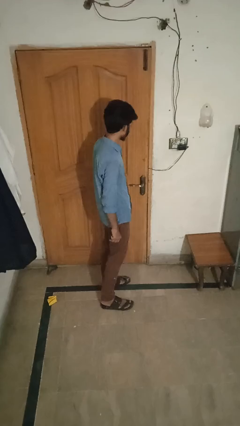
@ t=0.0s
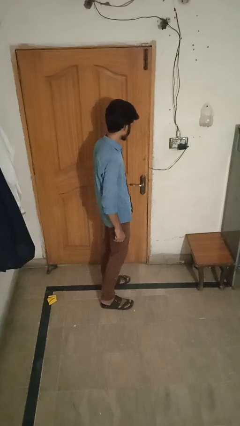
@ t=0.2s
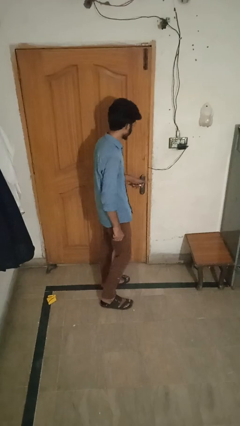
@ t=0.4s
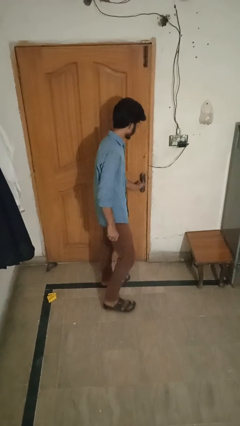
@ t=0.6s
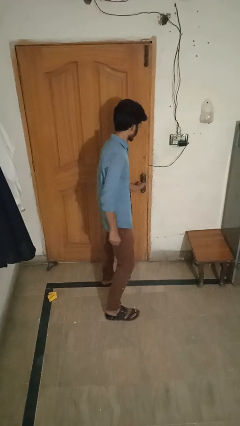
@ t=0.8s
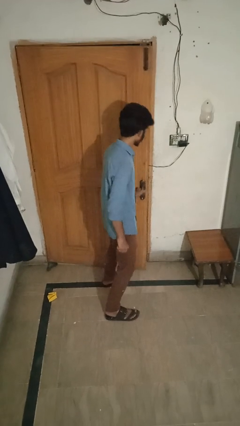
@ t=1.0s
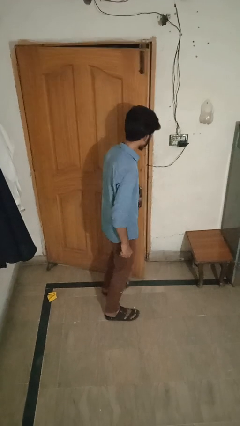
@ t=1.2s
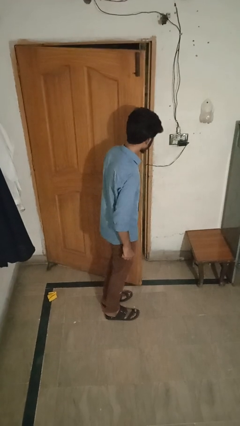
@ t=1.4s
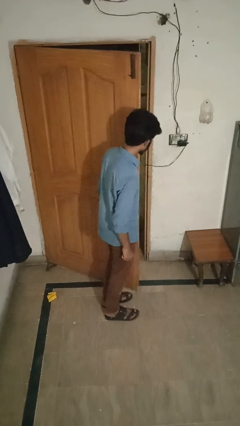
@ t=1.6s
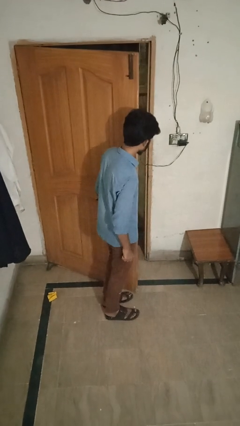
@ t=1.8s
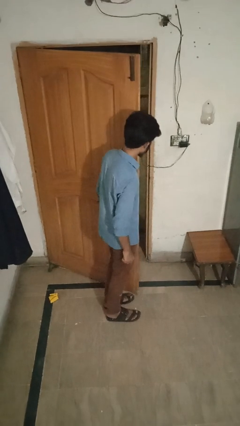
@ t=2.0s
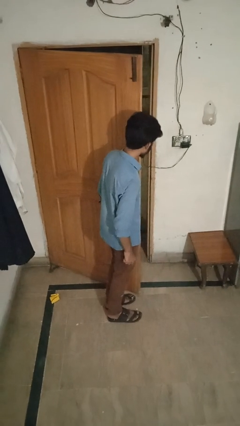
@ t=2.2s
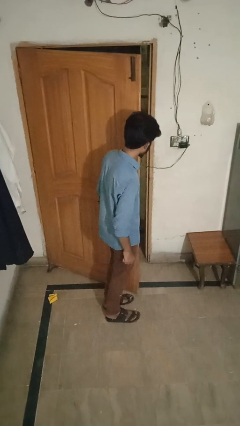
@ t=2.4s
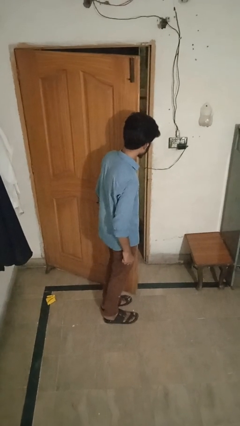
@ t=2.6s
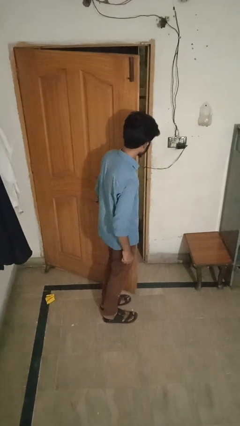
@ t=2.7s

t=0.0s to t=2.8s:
person opens facility door

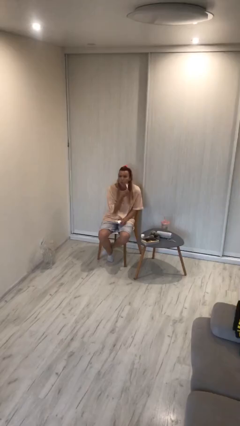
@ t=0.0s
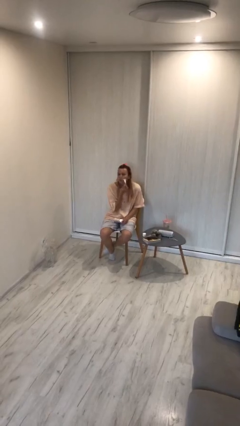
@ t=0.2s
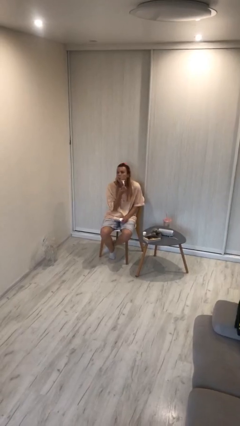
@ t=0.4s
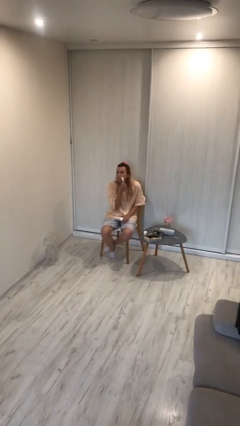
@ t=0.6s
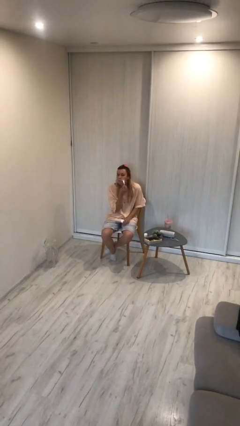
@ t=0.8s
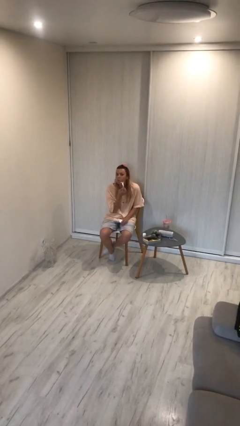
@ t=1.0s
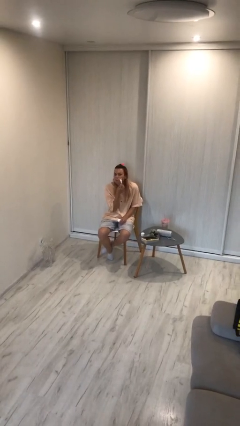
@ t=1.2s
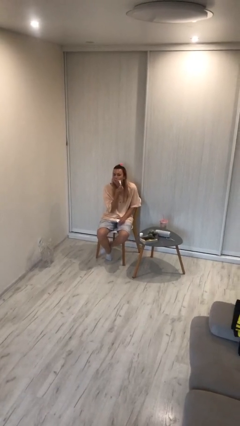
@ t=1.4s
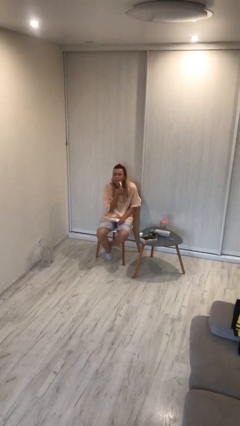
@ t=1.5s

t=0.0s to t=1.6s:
person shaves face

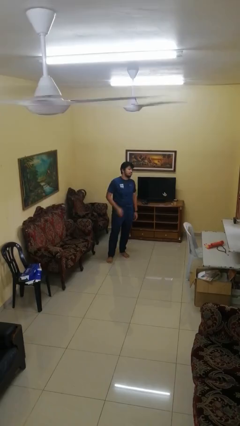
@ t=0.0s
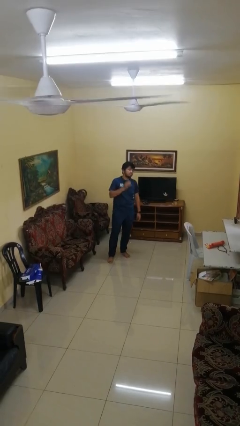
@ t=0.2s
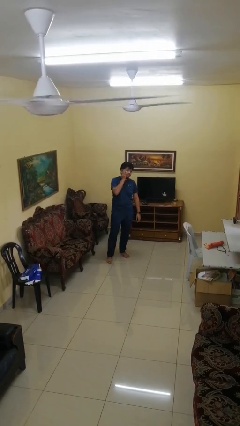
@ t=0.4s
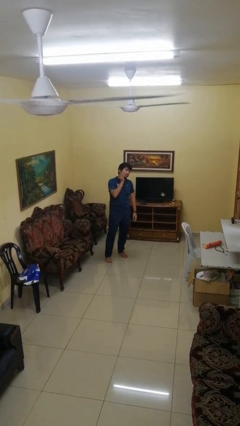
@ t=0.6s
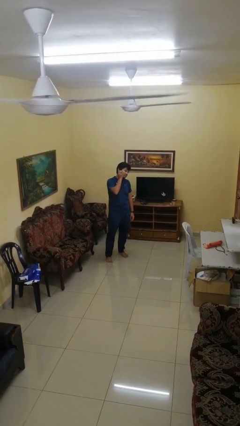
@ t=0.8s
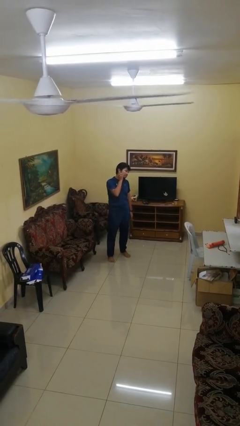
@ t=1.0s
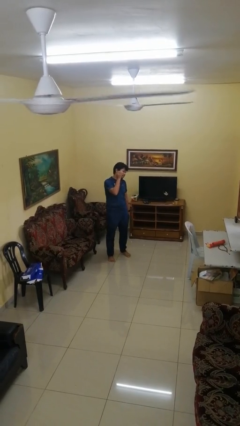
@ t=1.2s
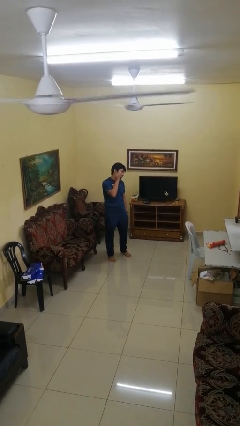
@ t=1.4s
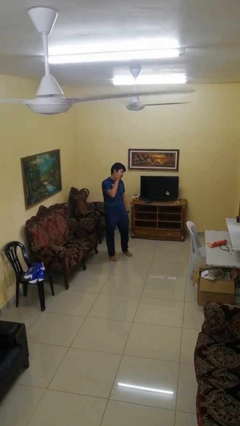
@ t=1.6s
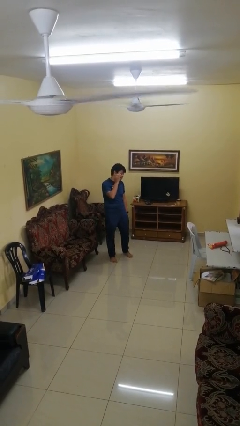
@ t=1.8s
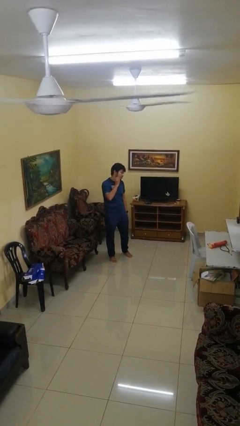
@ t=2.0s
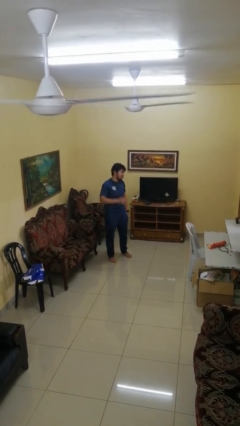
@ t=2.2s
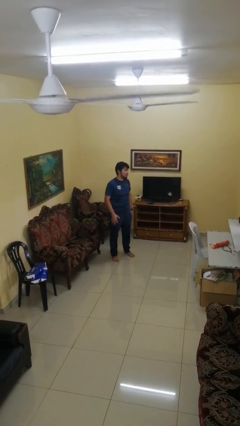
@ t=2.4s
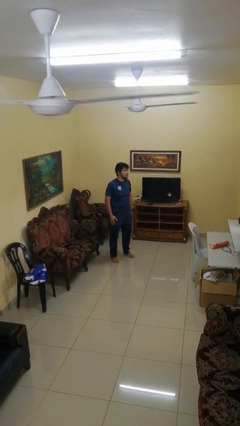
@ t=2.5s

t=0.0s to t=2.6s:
person scratches face

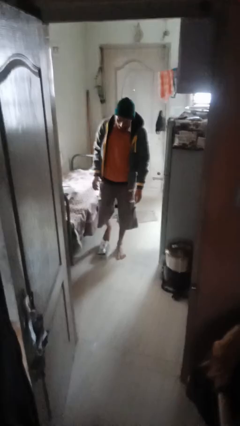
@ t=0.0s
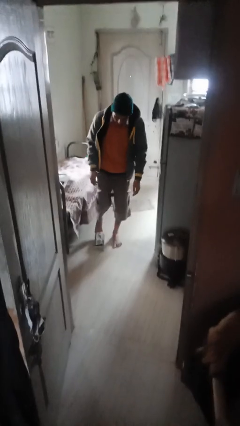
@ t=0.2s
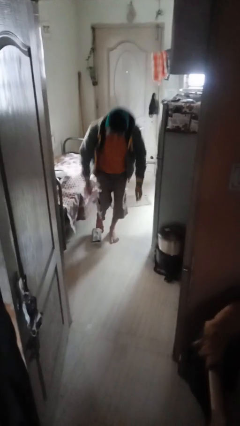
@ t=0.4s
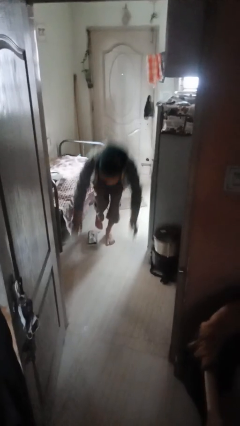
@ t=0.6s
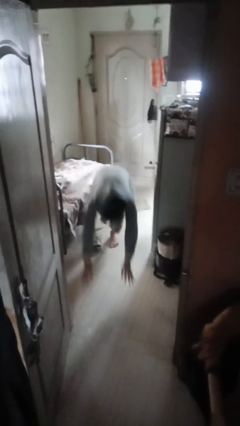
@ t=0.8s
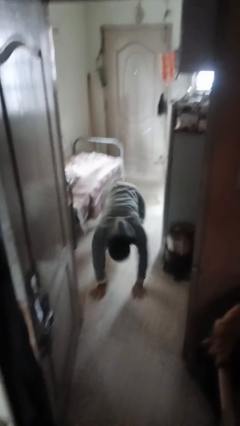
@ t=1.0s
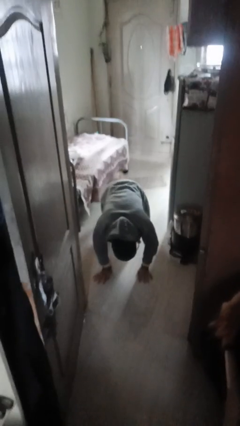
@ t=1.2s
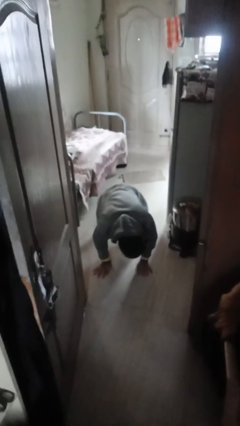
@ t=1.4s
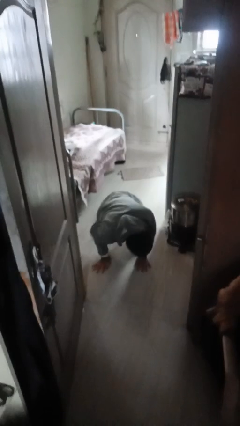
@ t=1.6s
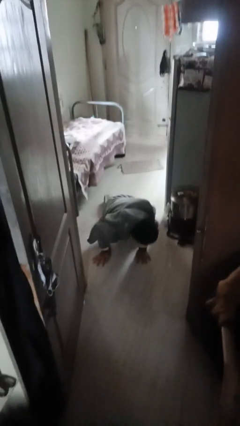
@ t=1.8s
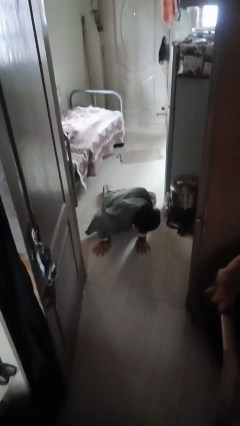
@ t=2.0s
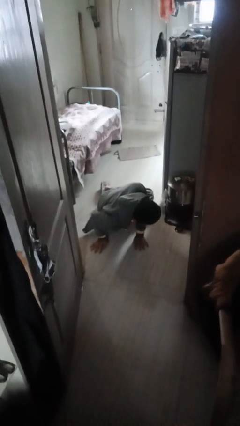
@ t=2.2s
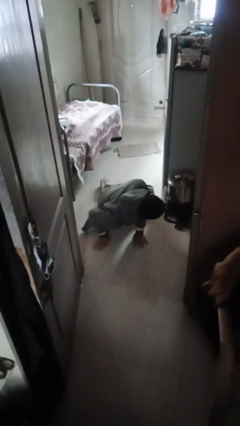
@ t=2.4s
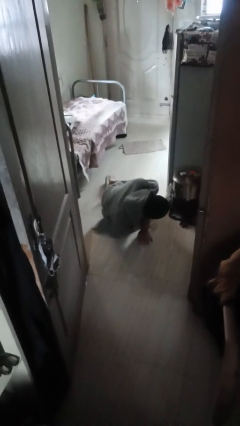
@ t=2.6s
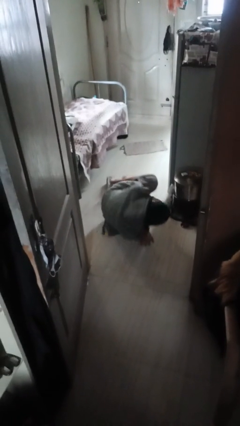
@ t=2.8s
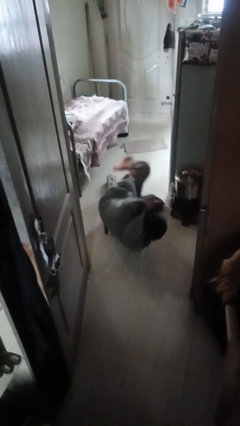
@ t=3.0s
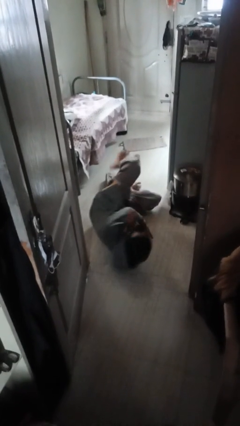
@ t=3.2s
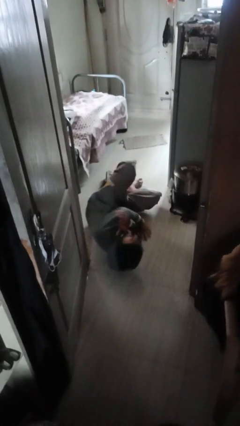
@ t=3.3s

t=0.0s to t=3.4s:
person trips on object on floor

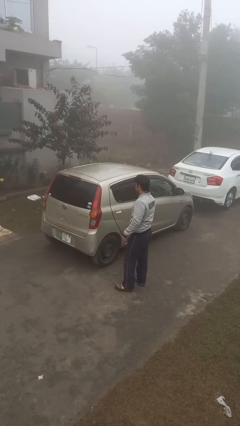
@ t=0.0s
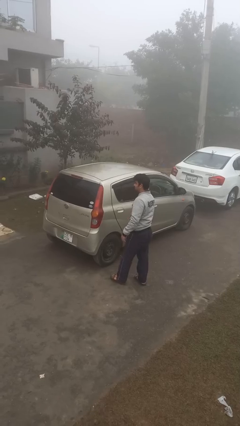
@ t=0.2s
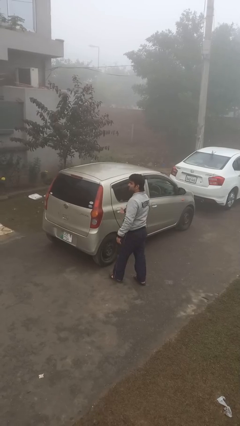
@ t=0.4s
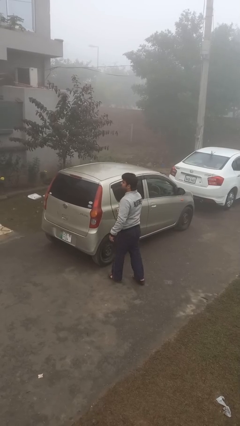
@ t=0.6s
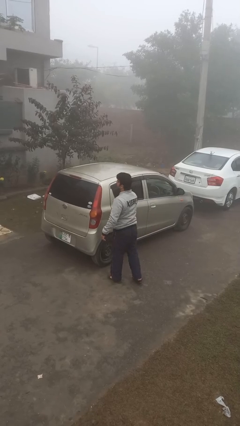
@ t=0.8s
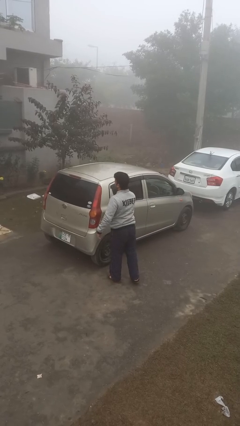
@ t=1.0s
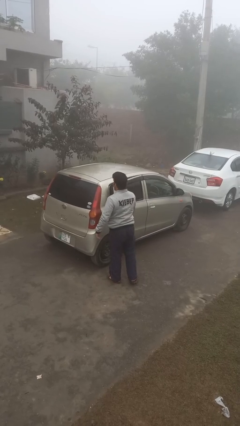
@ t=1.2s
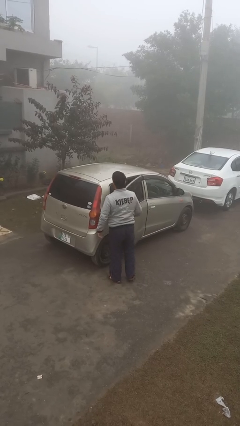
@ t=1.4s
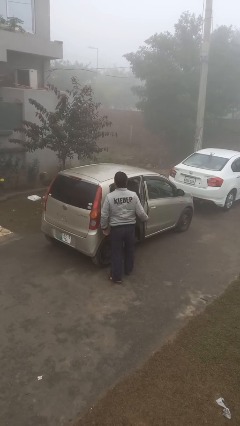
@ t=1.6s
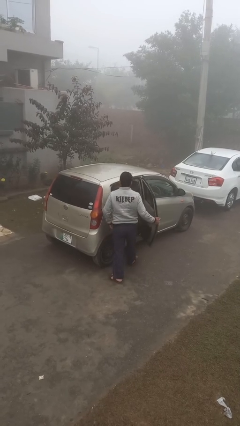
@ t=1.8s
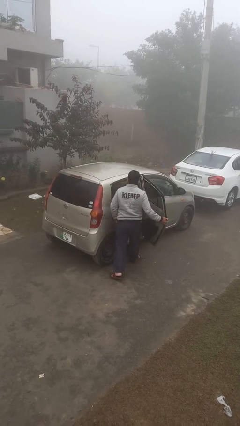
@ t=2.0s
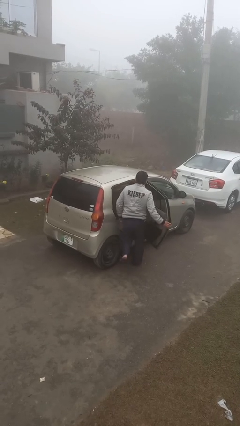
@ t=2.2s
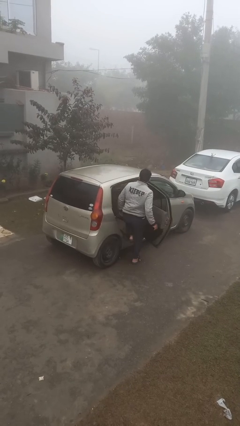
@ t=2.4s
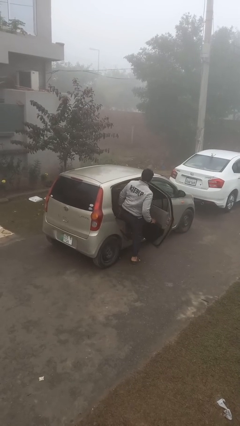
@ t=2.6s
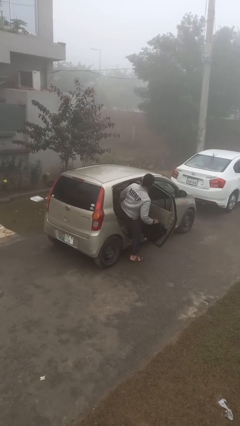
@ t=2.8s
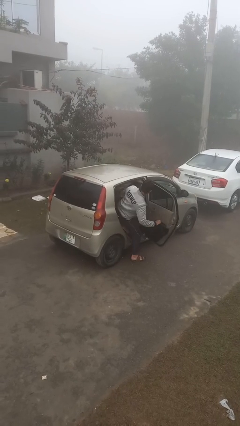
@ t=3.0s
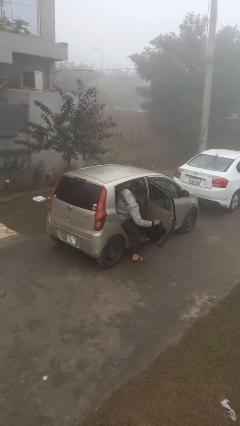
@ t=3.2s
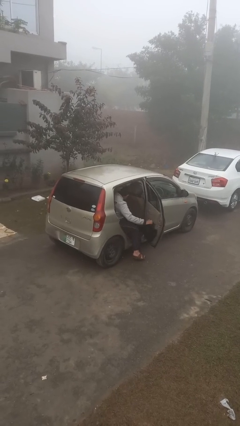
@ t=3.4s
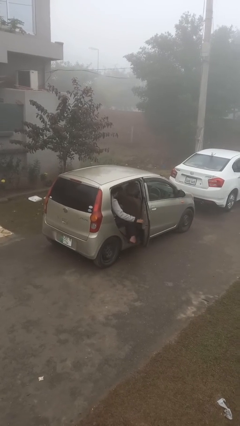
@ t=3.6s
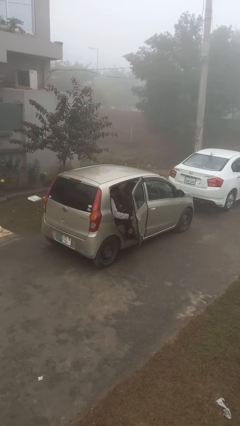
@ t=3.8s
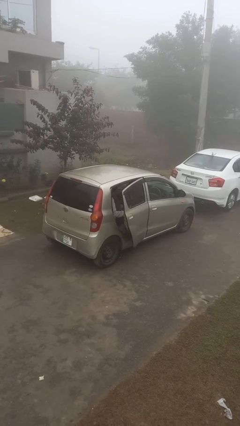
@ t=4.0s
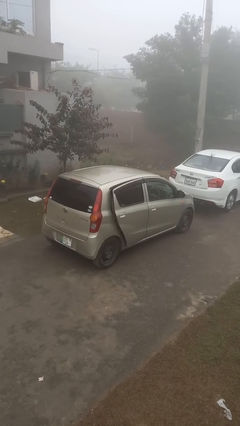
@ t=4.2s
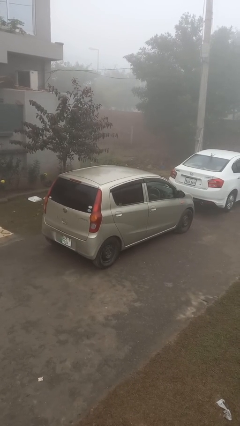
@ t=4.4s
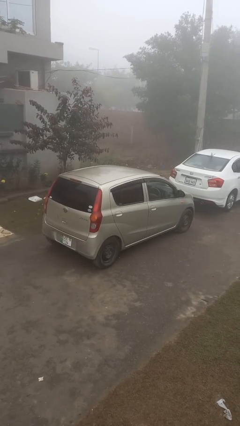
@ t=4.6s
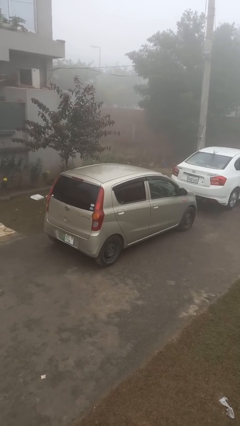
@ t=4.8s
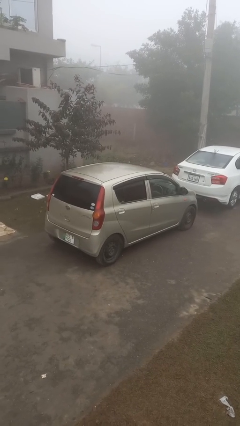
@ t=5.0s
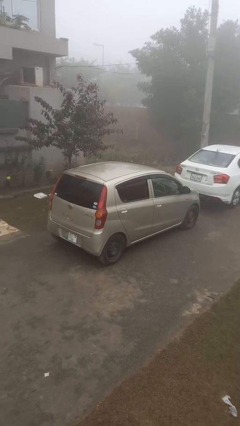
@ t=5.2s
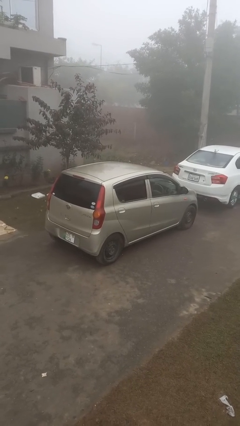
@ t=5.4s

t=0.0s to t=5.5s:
car picks up person

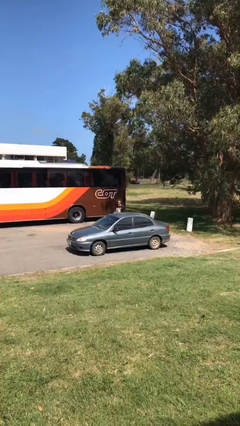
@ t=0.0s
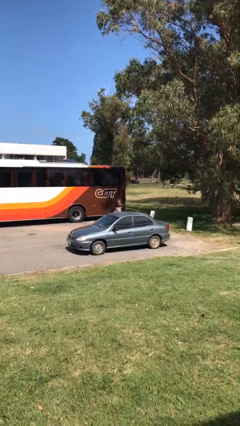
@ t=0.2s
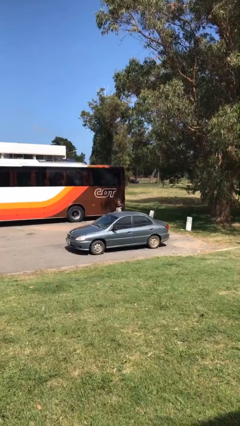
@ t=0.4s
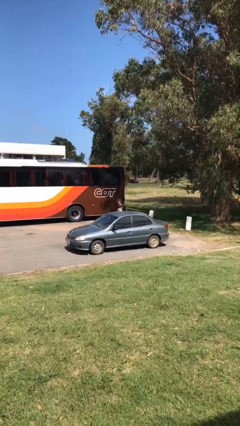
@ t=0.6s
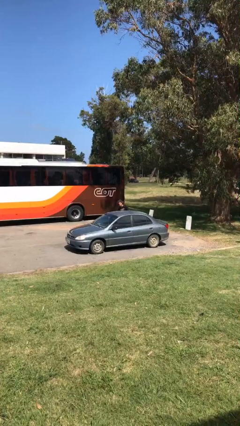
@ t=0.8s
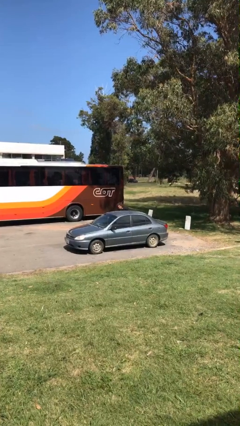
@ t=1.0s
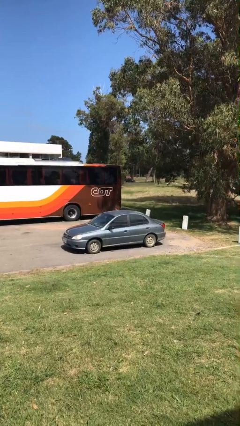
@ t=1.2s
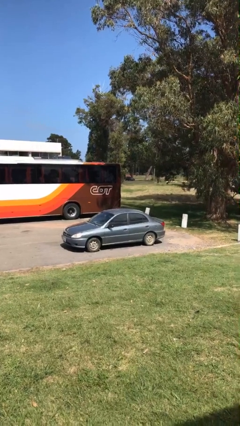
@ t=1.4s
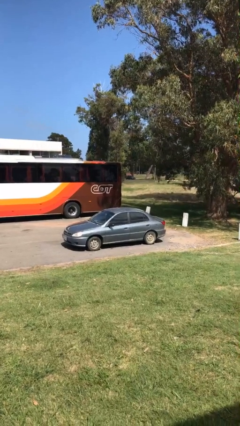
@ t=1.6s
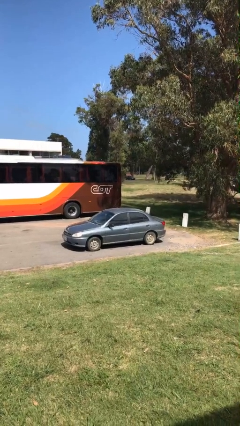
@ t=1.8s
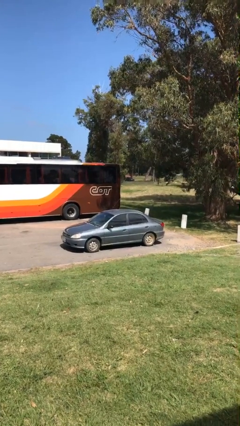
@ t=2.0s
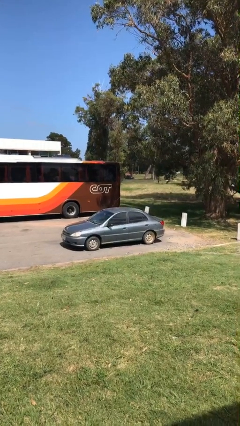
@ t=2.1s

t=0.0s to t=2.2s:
person enters car
